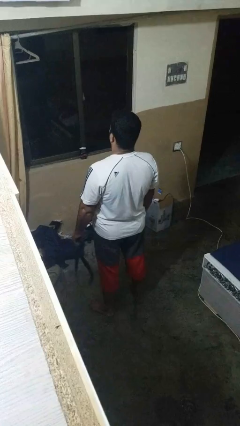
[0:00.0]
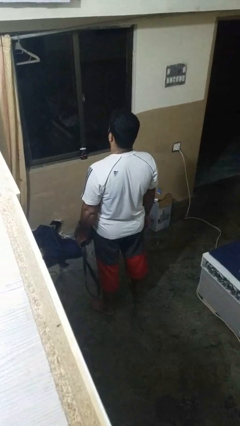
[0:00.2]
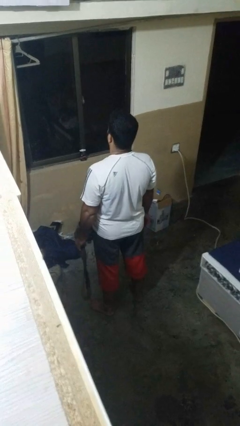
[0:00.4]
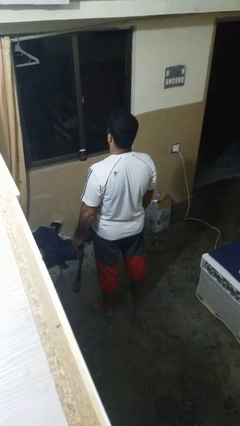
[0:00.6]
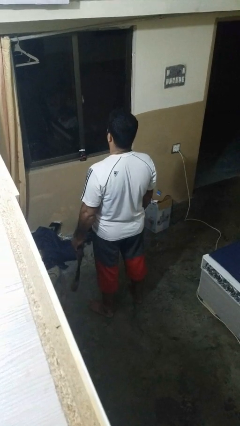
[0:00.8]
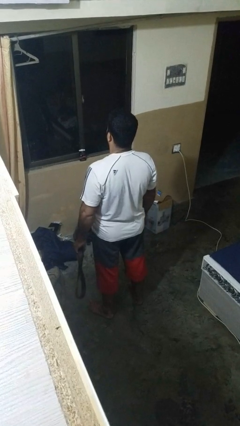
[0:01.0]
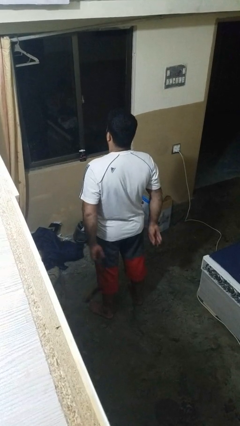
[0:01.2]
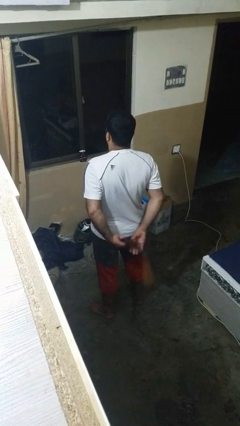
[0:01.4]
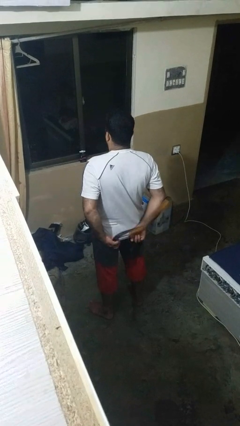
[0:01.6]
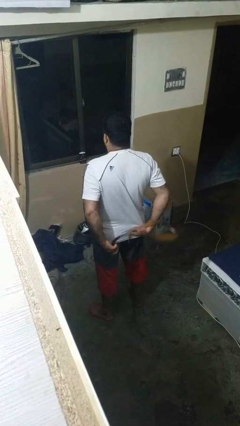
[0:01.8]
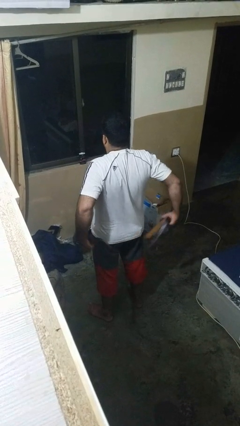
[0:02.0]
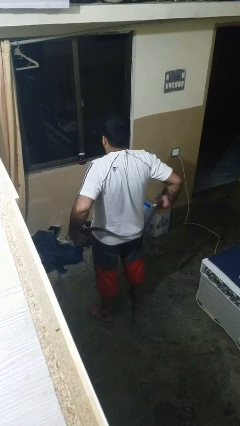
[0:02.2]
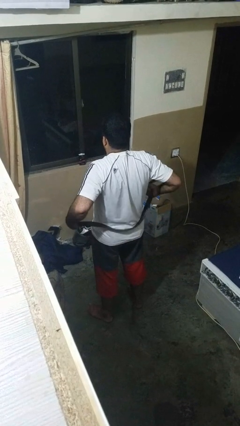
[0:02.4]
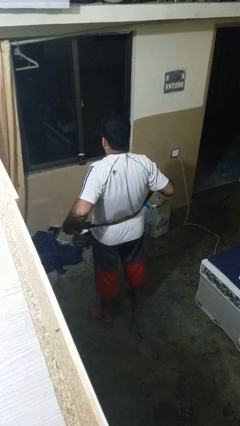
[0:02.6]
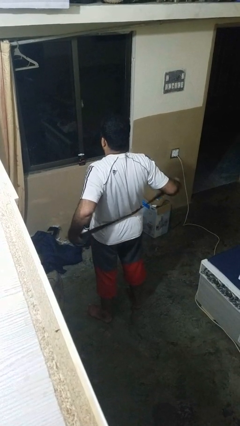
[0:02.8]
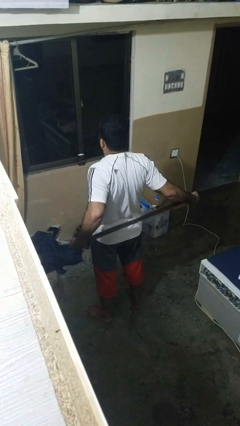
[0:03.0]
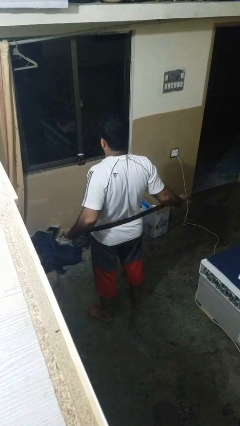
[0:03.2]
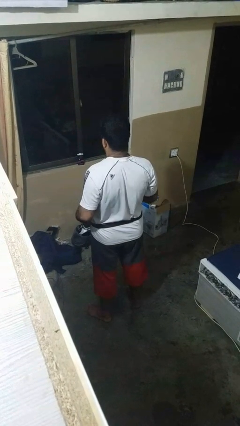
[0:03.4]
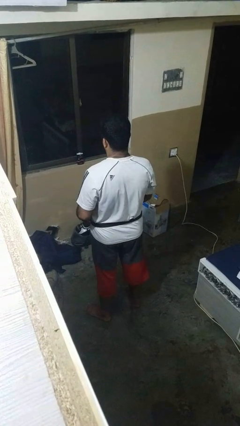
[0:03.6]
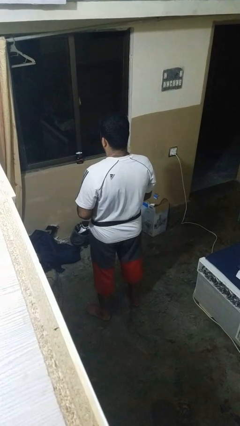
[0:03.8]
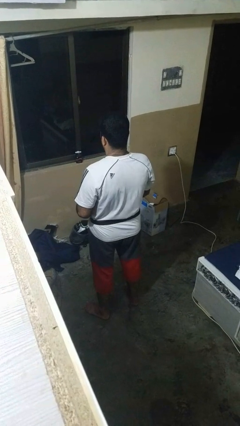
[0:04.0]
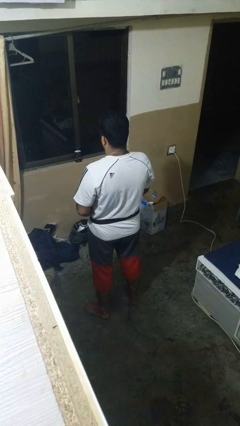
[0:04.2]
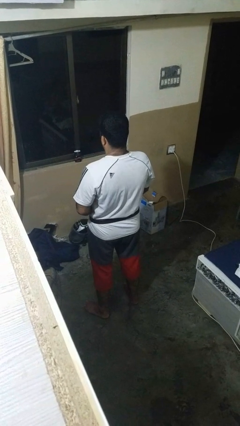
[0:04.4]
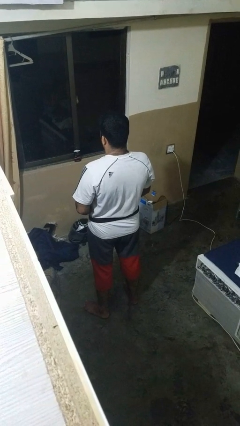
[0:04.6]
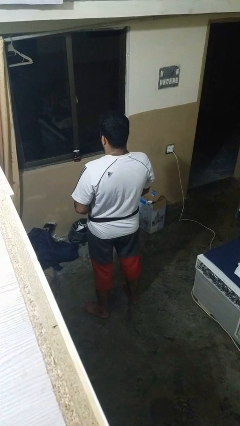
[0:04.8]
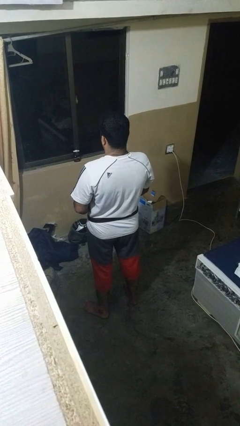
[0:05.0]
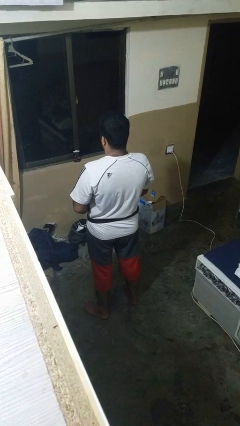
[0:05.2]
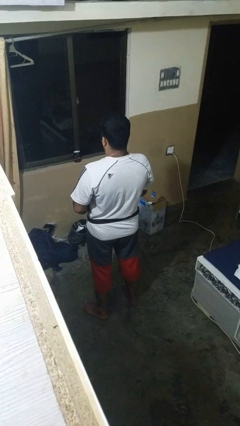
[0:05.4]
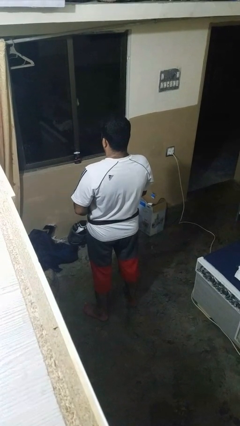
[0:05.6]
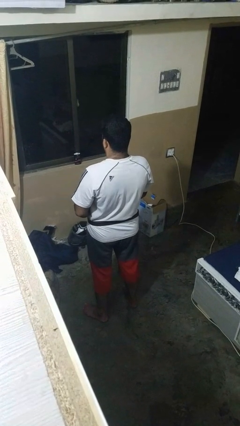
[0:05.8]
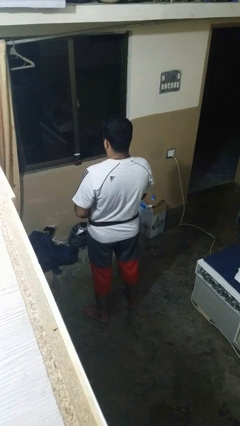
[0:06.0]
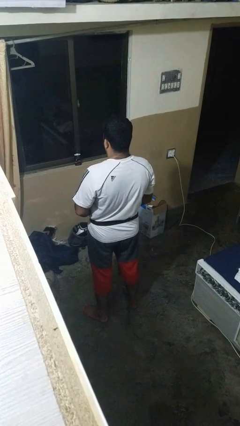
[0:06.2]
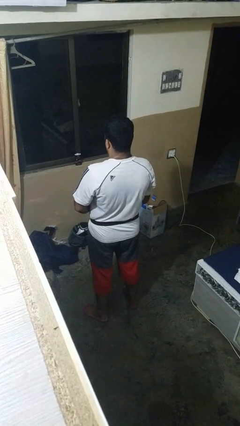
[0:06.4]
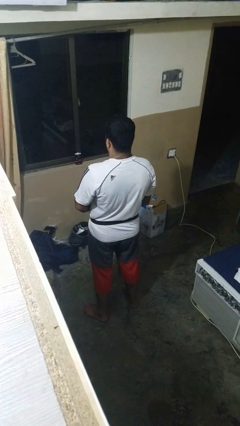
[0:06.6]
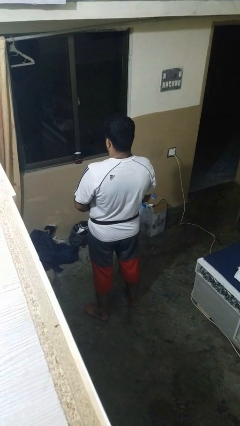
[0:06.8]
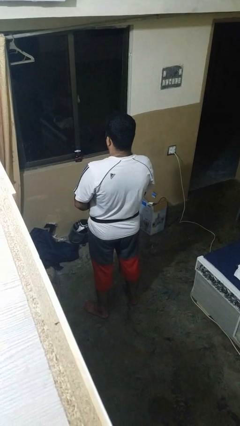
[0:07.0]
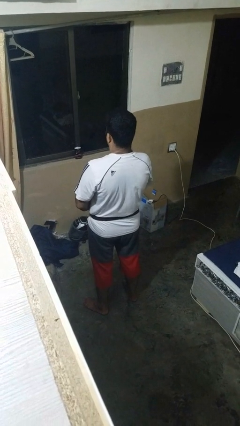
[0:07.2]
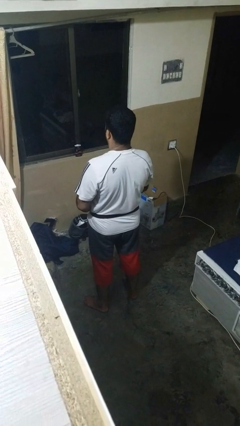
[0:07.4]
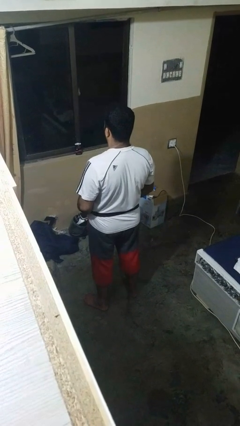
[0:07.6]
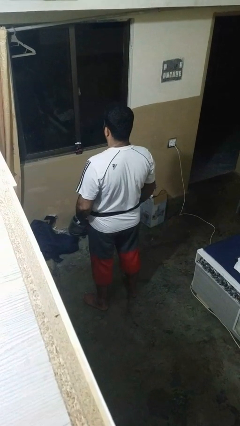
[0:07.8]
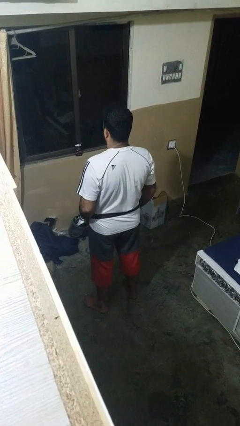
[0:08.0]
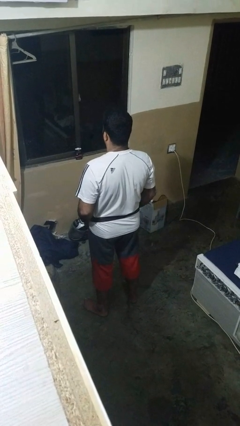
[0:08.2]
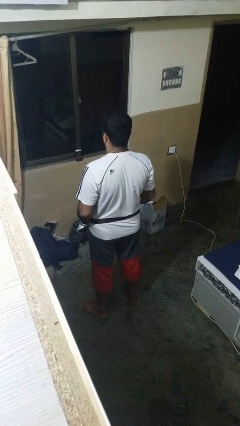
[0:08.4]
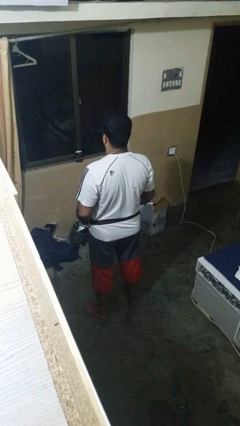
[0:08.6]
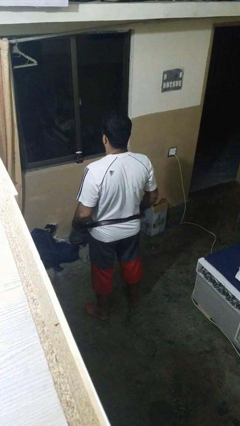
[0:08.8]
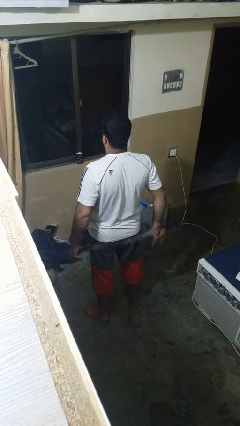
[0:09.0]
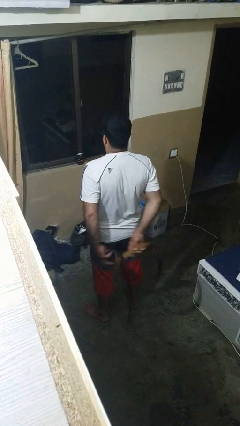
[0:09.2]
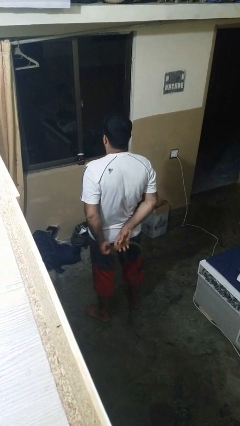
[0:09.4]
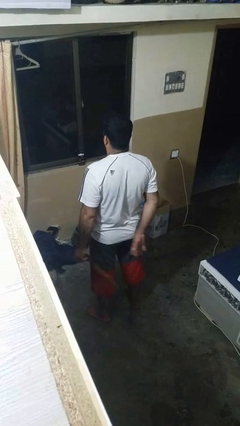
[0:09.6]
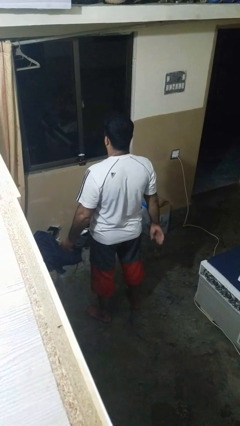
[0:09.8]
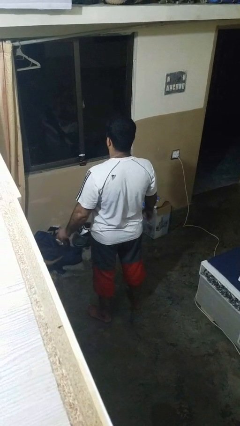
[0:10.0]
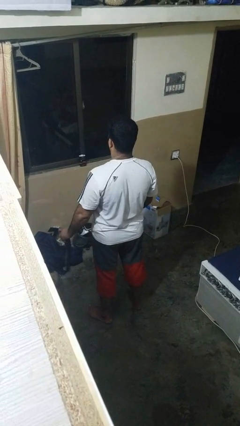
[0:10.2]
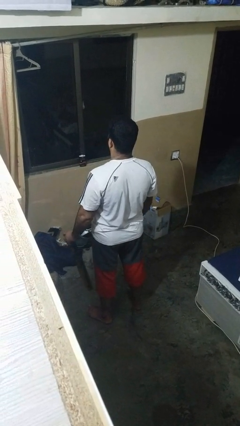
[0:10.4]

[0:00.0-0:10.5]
person puts on belt

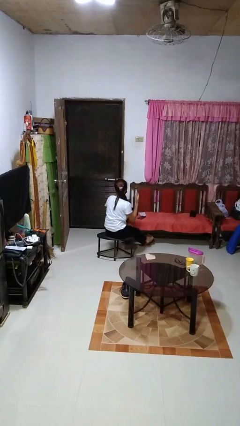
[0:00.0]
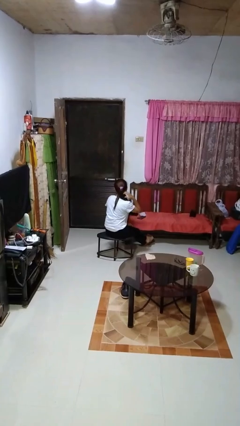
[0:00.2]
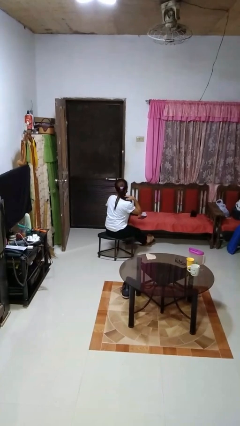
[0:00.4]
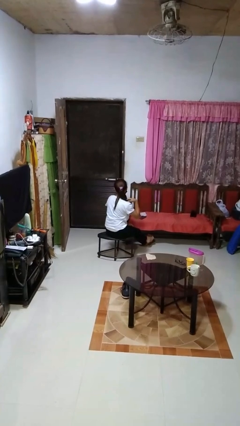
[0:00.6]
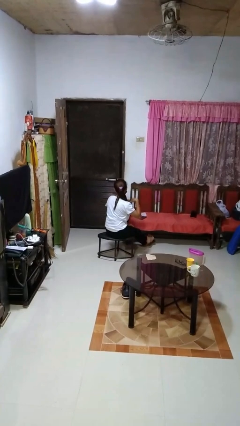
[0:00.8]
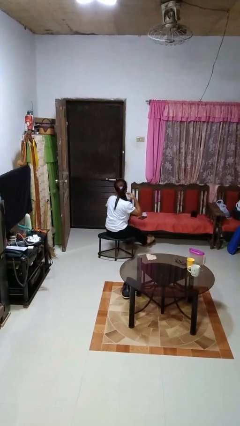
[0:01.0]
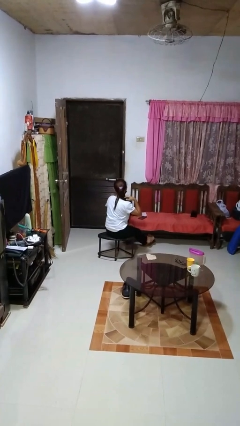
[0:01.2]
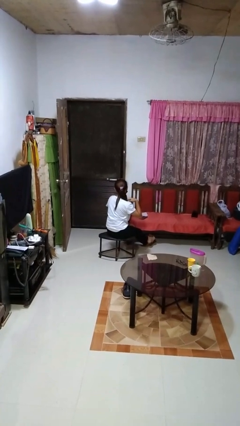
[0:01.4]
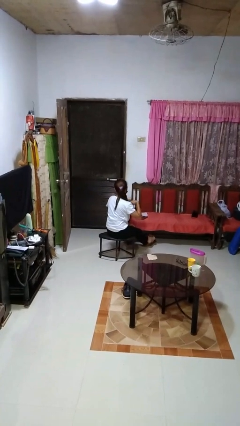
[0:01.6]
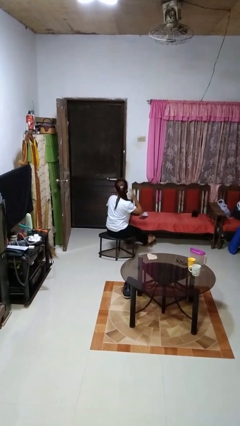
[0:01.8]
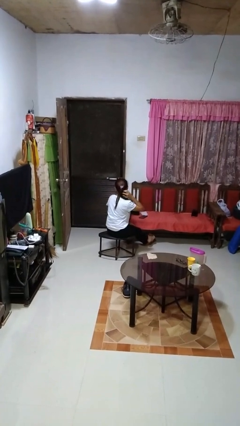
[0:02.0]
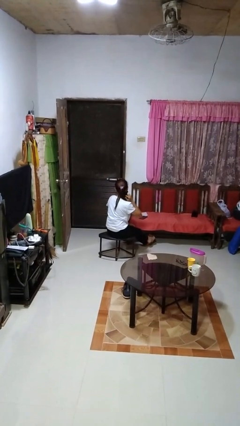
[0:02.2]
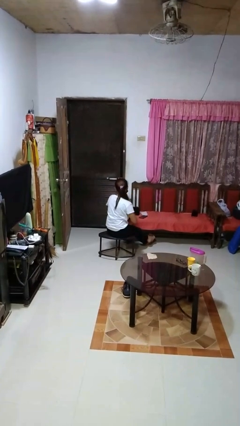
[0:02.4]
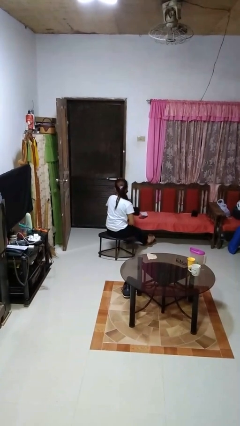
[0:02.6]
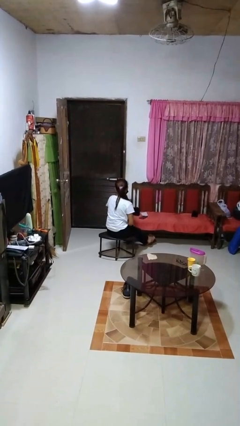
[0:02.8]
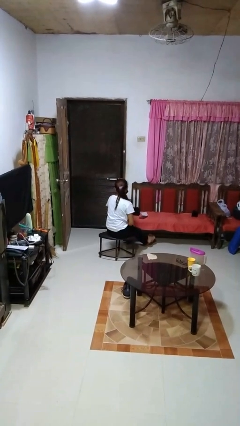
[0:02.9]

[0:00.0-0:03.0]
person strokes hair

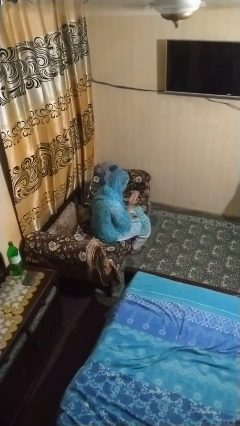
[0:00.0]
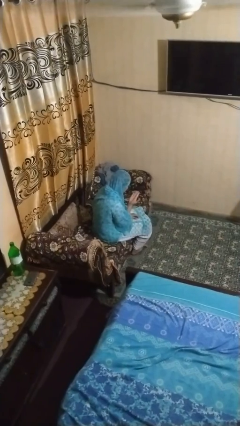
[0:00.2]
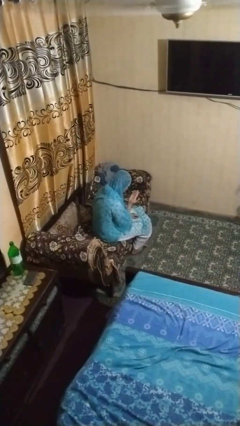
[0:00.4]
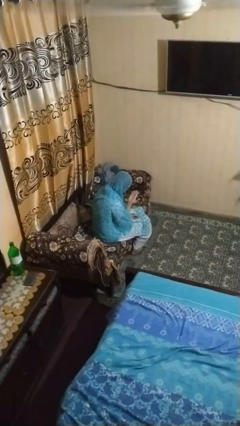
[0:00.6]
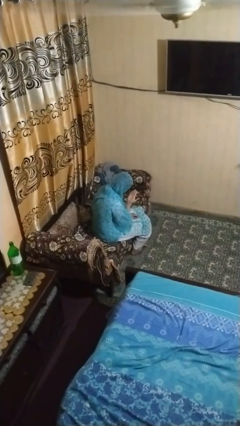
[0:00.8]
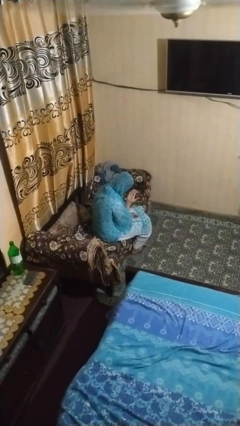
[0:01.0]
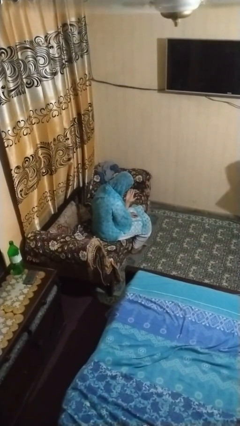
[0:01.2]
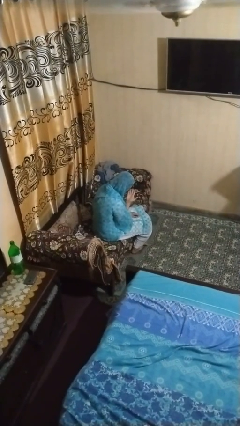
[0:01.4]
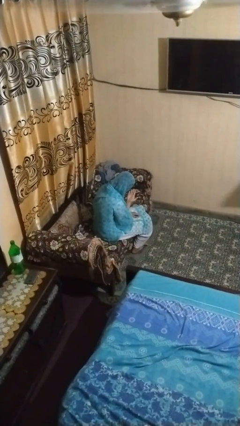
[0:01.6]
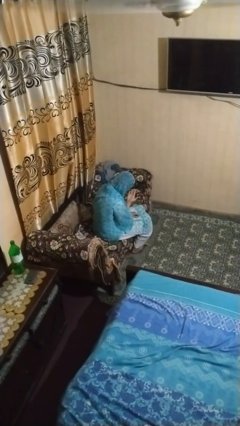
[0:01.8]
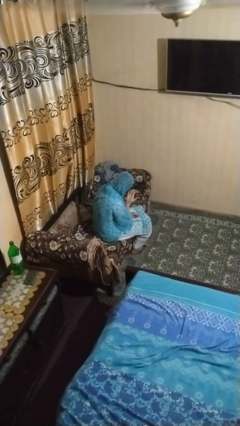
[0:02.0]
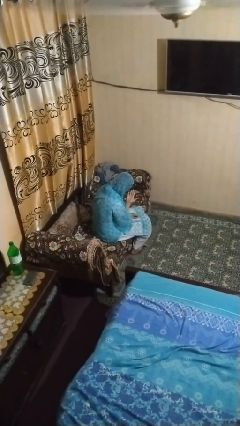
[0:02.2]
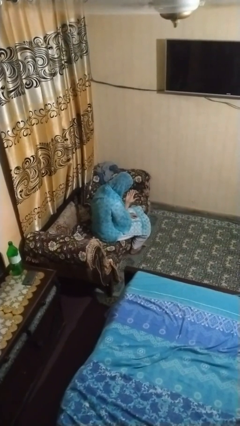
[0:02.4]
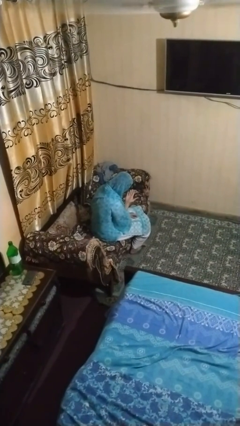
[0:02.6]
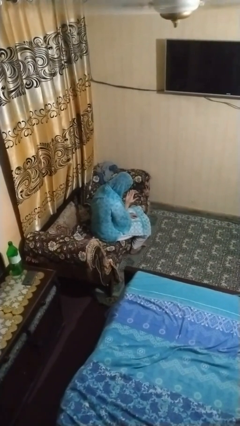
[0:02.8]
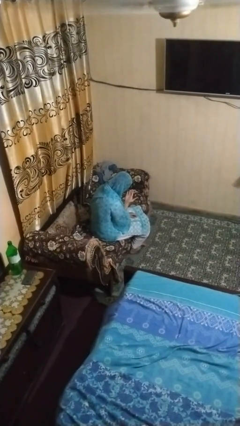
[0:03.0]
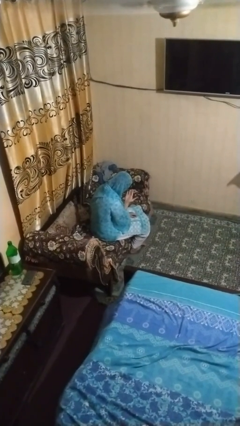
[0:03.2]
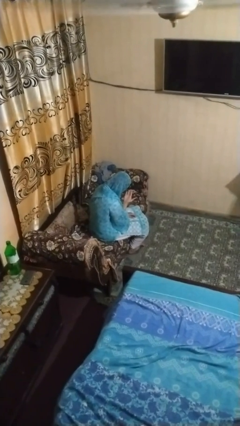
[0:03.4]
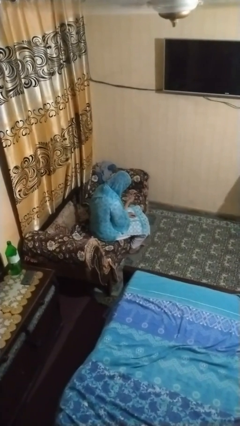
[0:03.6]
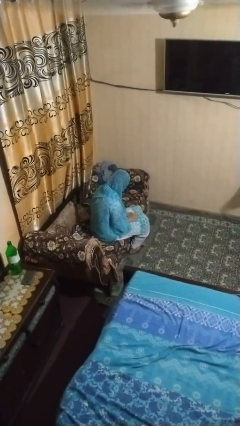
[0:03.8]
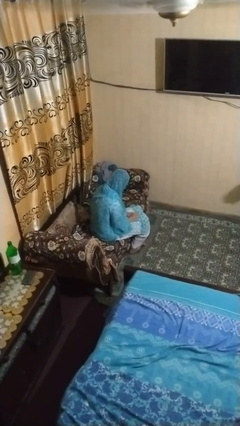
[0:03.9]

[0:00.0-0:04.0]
person looks at hands in lap

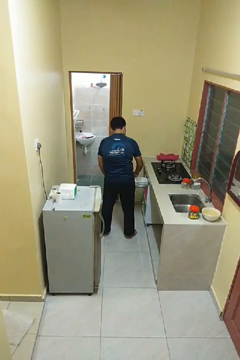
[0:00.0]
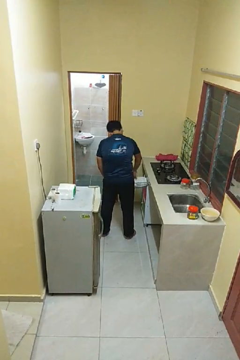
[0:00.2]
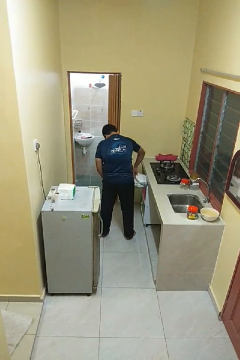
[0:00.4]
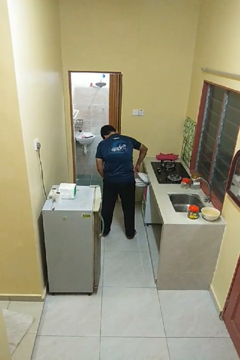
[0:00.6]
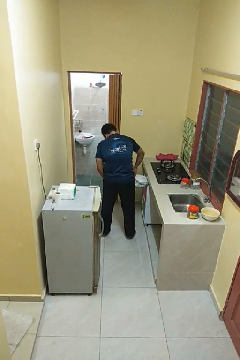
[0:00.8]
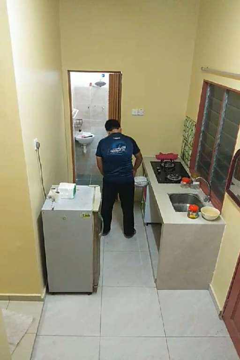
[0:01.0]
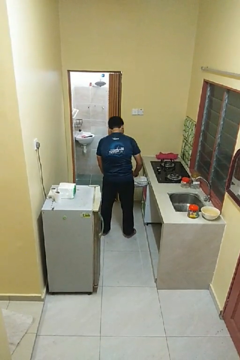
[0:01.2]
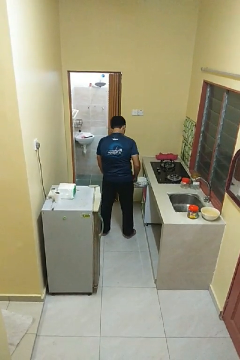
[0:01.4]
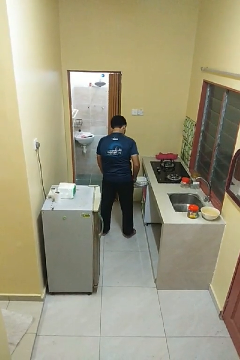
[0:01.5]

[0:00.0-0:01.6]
person searches in kitchen drawer
